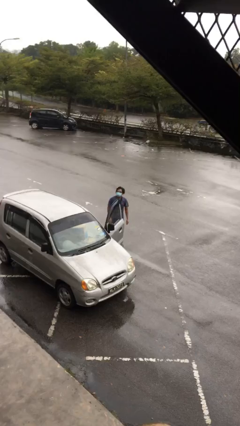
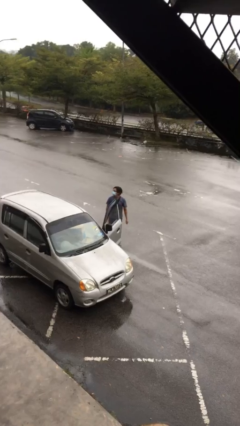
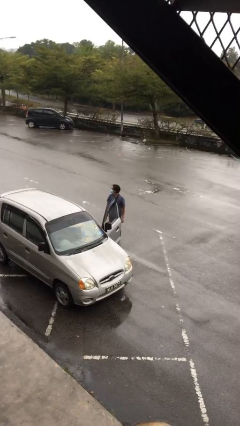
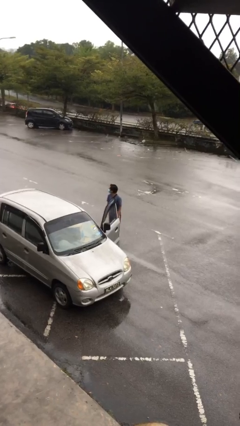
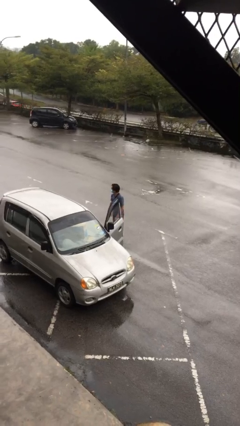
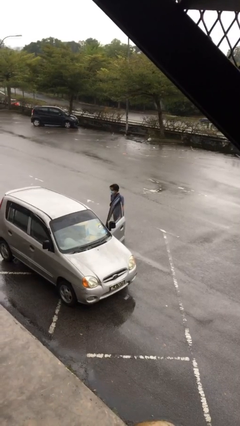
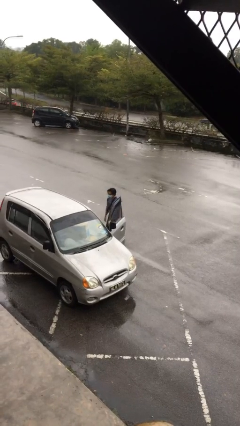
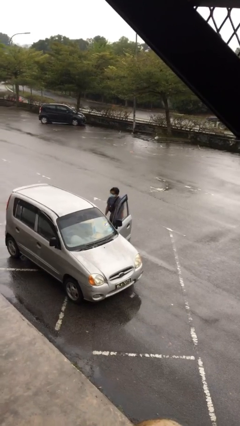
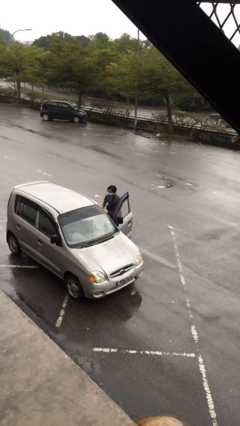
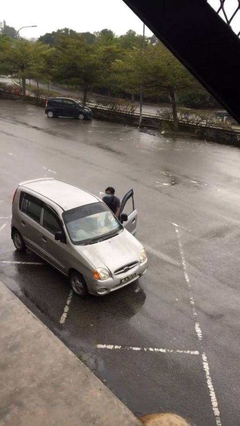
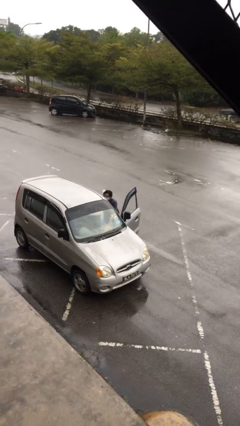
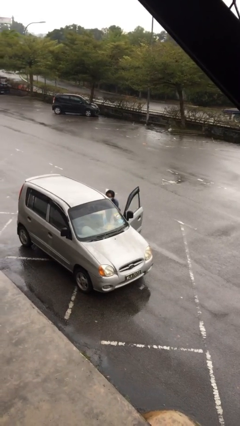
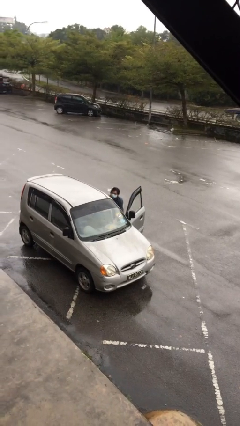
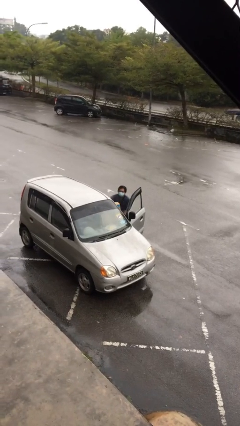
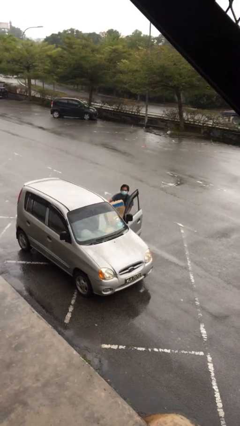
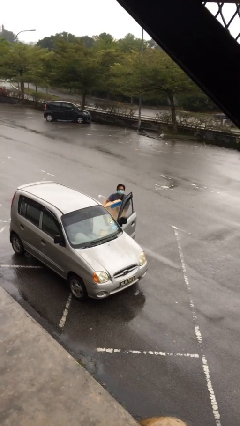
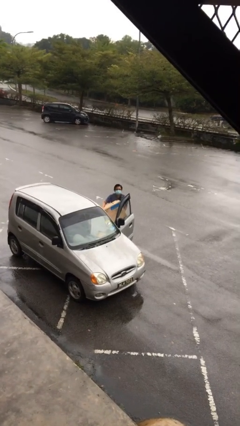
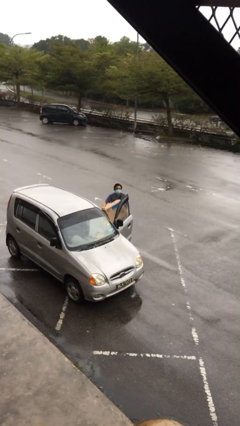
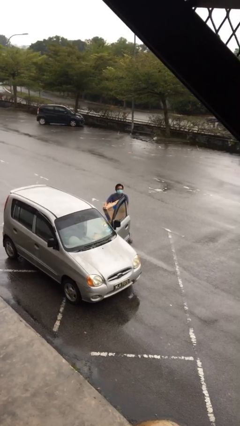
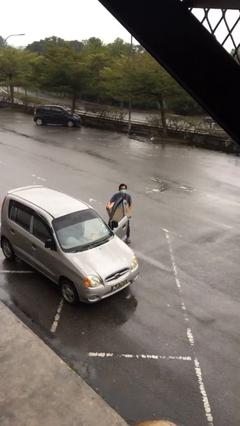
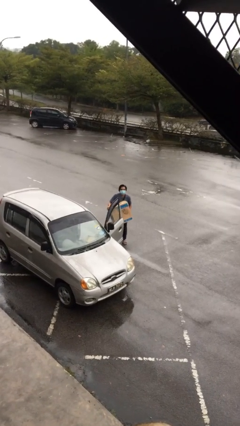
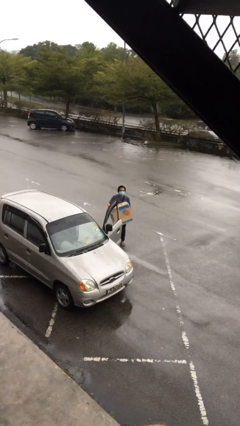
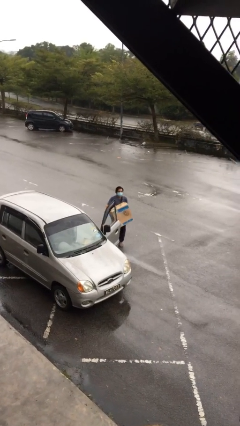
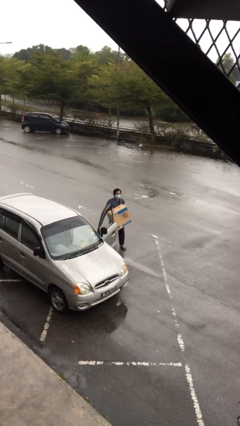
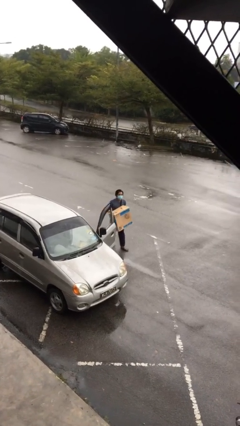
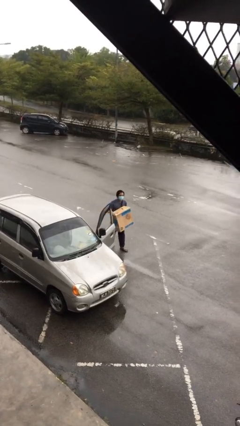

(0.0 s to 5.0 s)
person unloads car

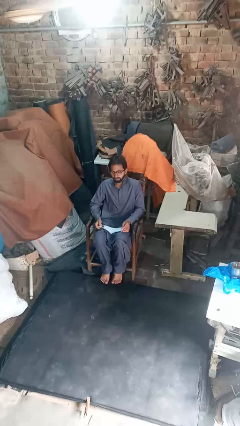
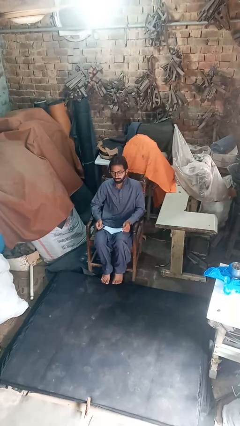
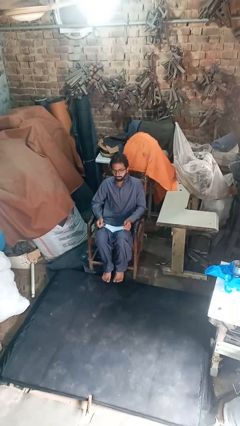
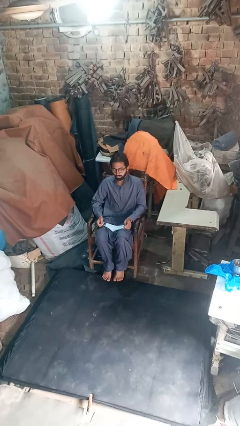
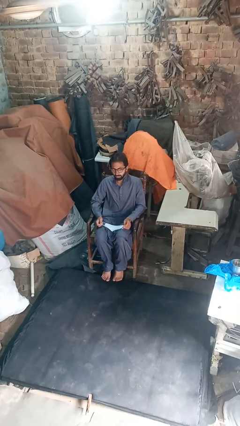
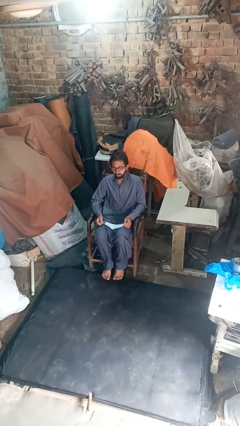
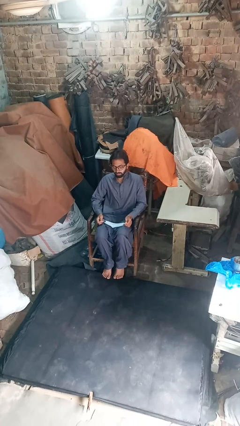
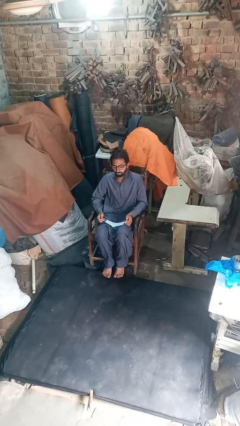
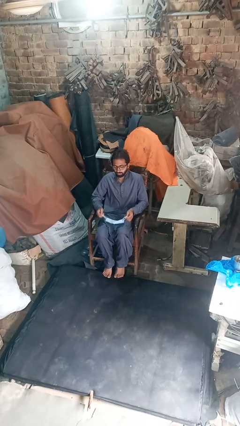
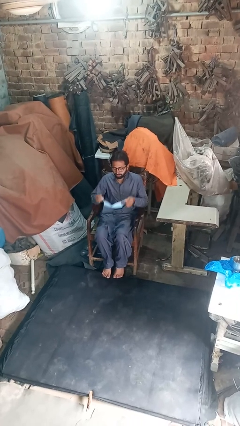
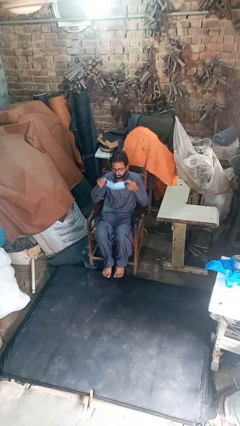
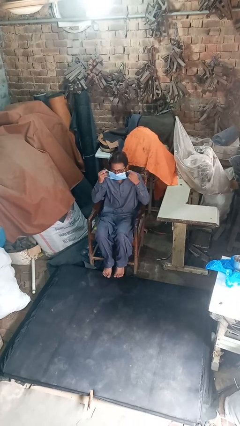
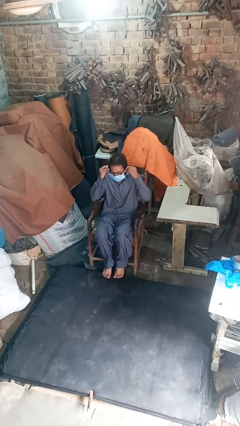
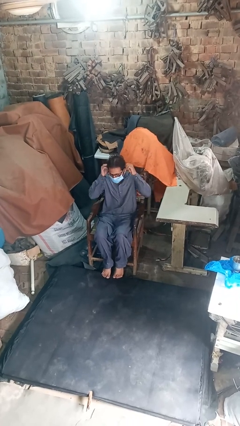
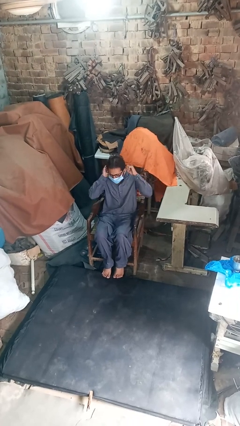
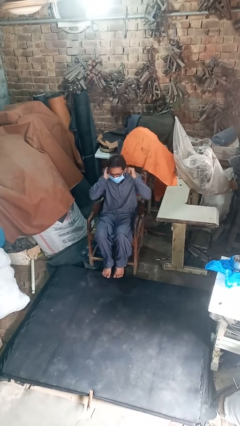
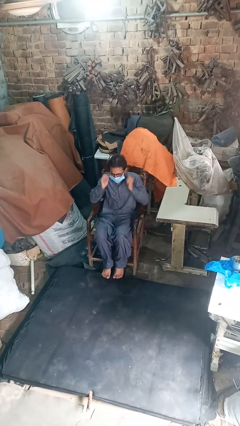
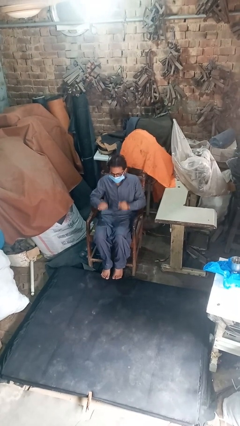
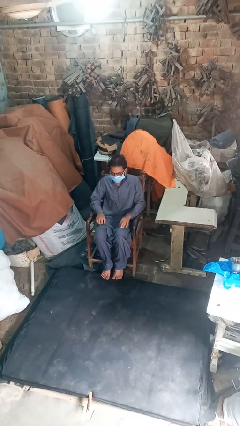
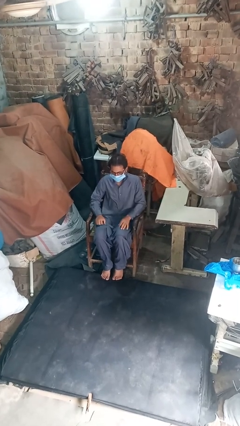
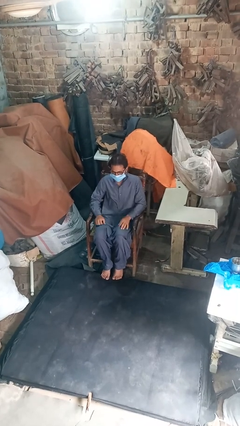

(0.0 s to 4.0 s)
person puts on facemask

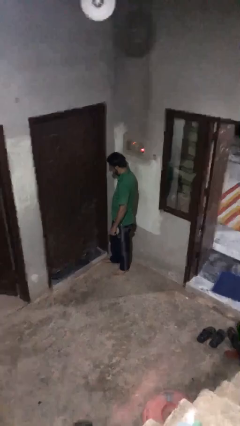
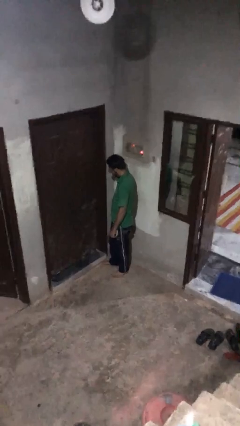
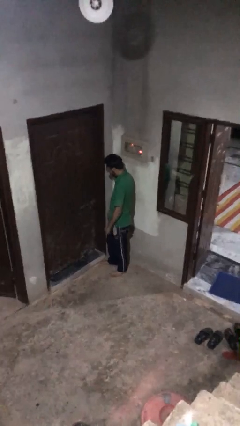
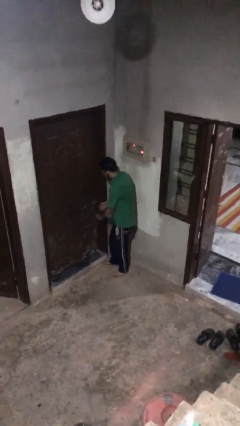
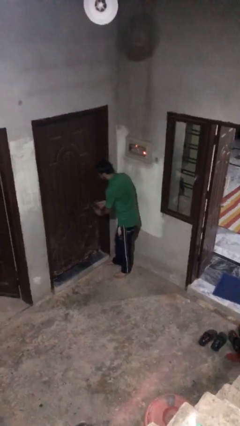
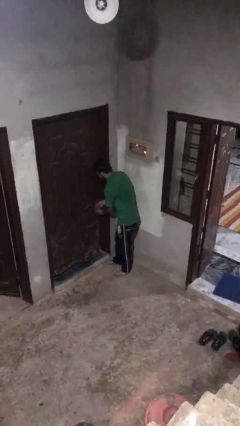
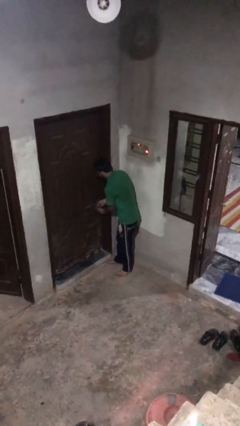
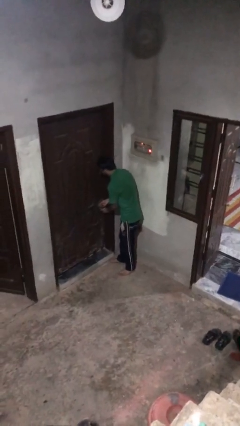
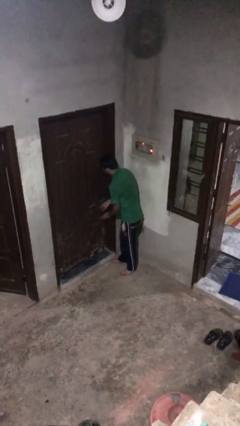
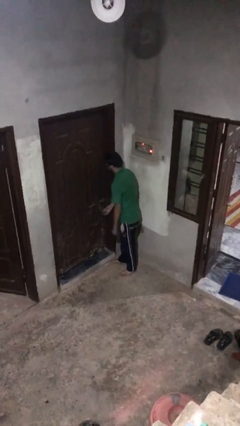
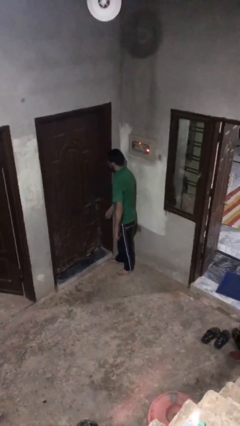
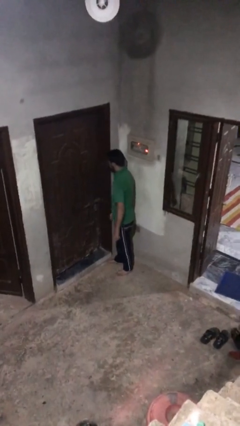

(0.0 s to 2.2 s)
person unlocks door with keys

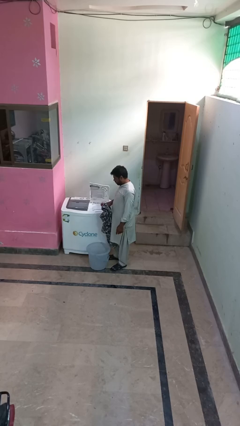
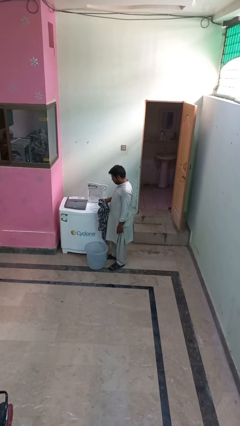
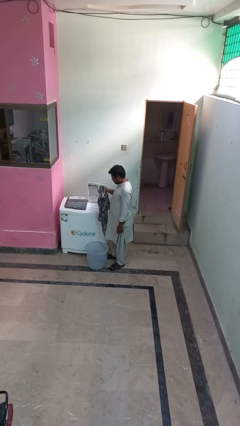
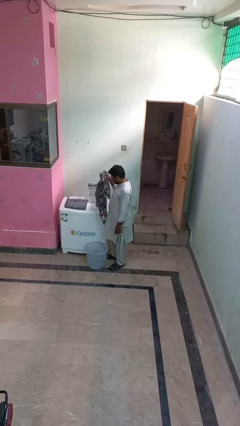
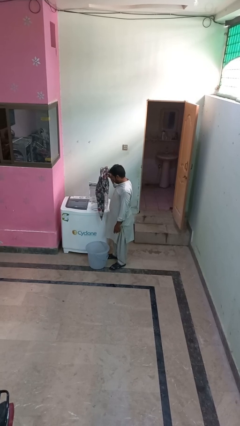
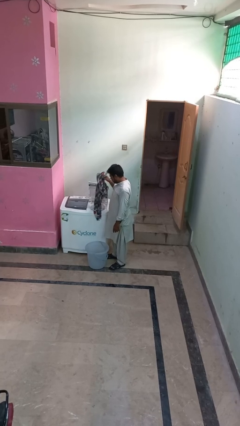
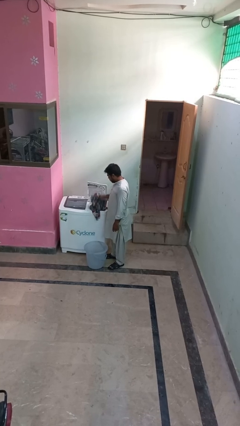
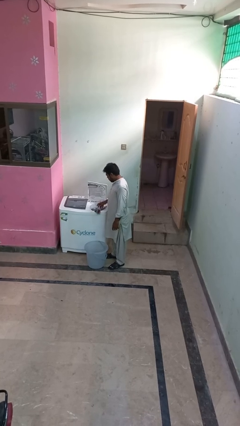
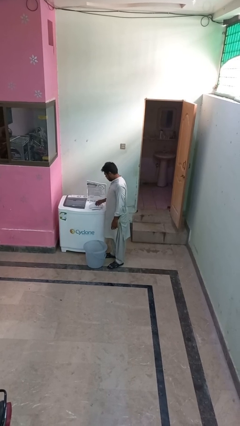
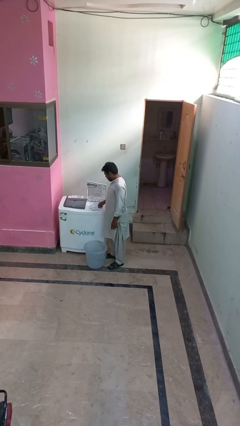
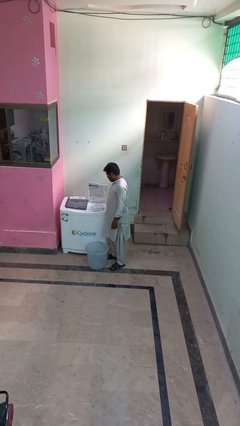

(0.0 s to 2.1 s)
person loads dryer

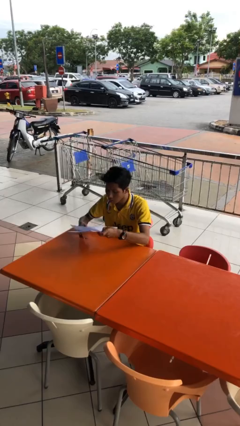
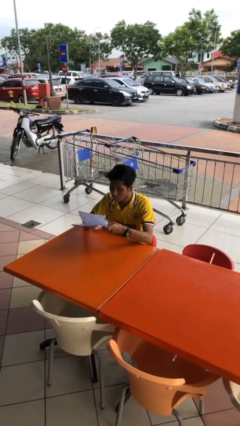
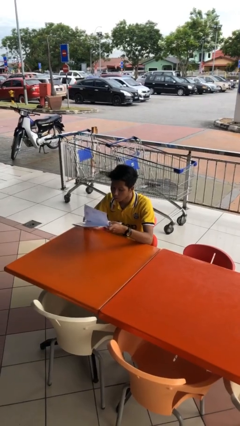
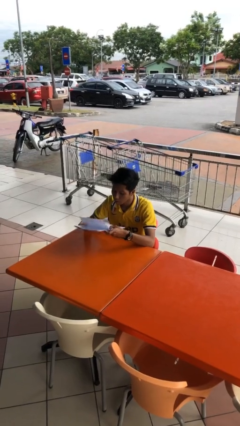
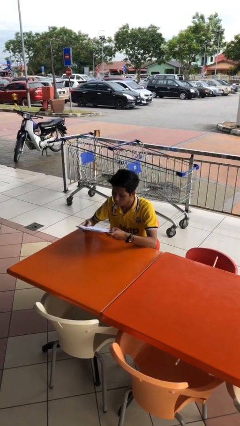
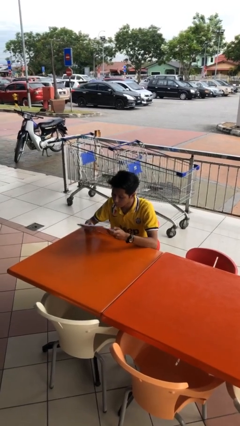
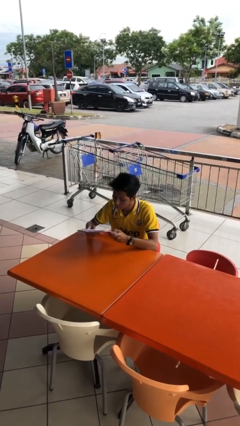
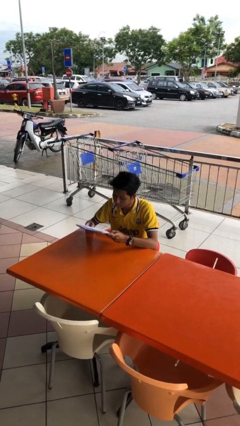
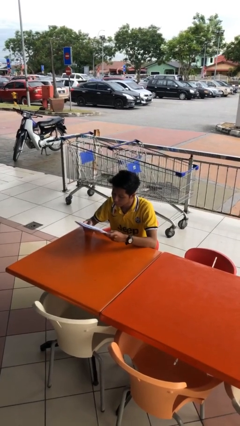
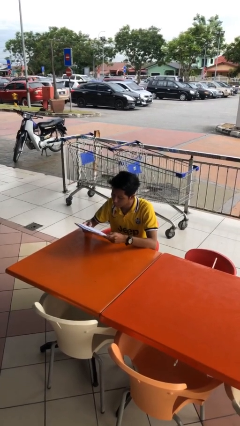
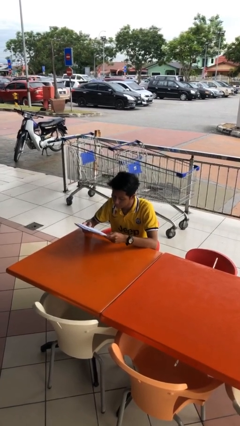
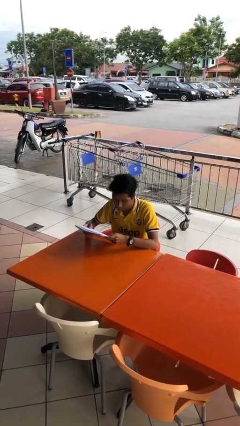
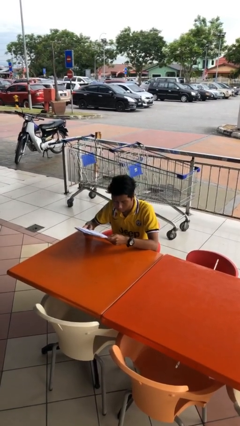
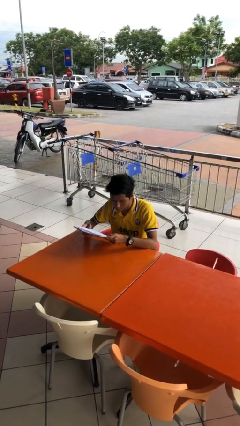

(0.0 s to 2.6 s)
person reads document

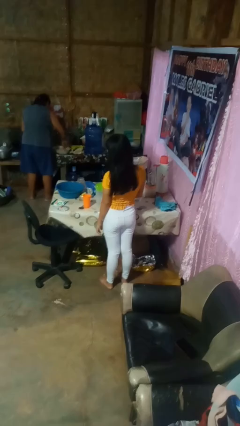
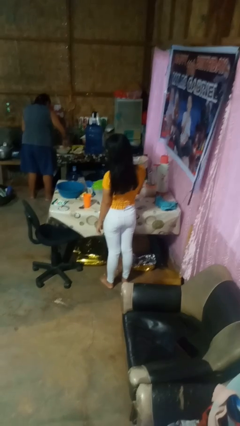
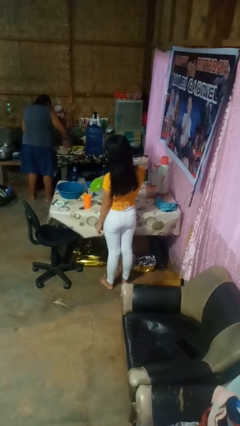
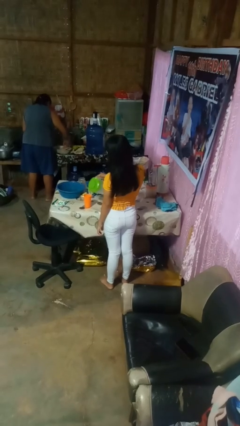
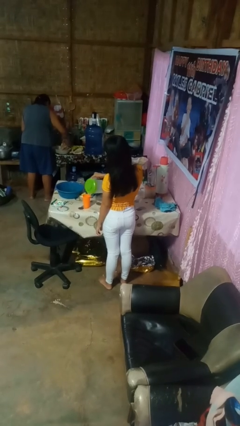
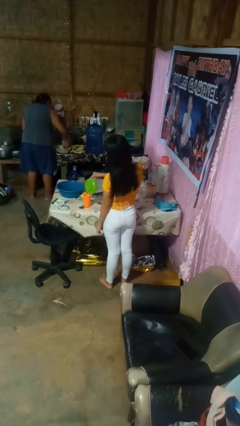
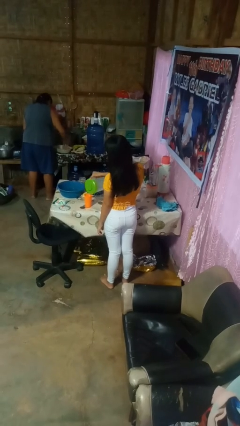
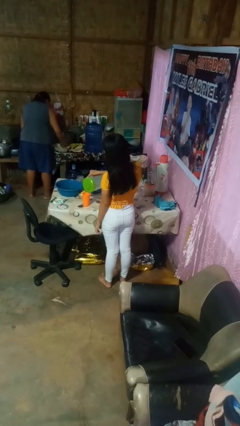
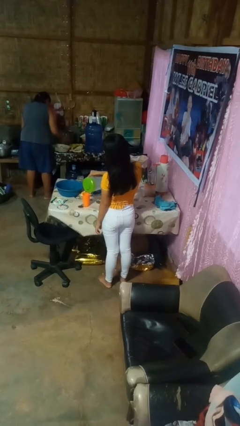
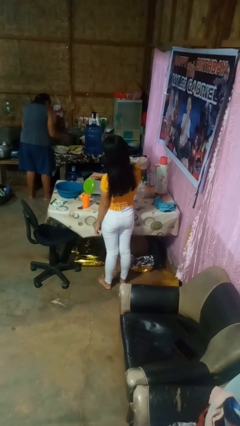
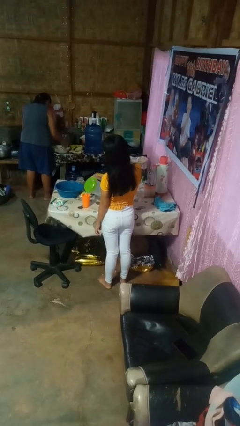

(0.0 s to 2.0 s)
person pours liquid into cup
